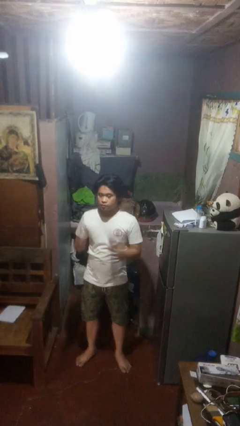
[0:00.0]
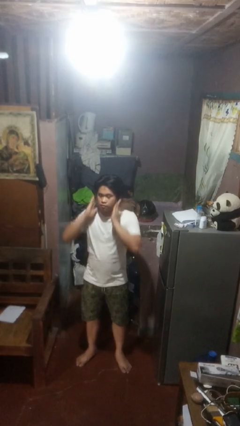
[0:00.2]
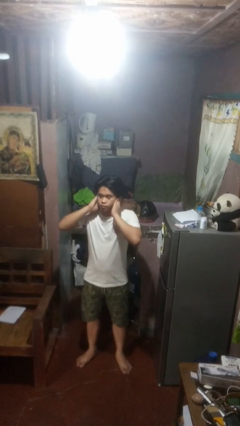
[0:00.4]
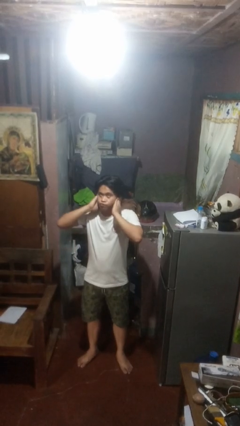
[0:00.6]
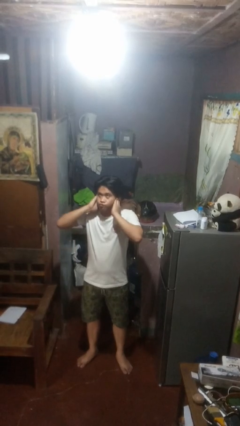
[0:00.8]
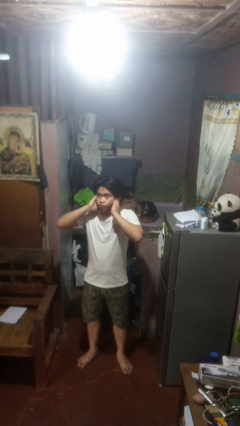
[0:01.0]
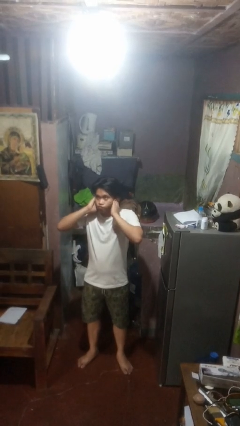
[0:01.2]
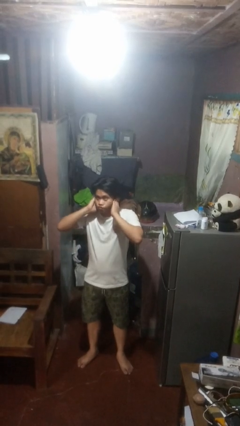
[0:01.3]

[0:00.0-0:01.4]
person puts fingers in ear

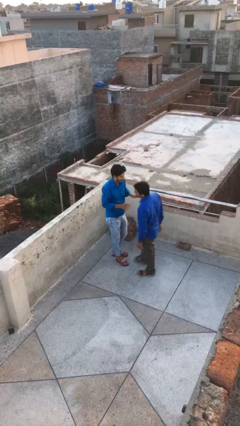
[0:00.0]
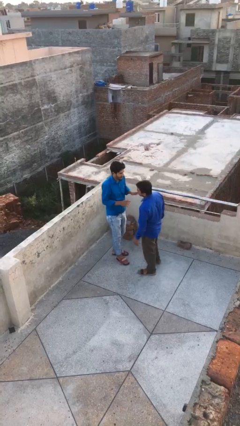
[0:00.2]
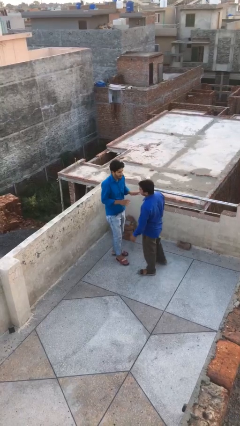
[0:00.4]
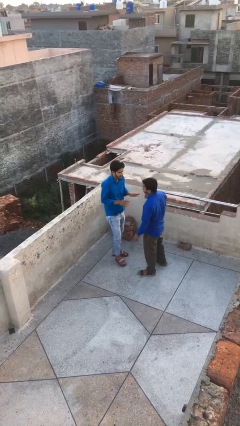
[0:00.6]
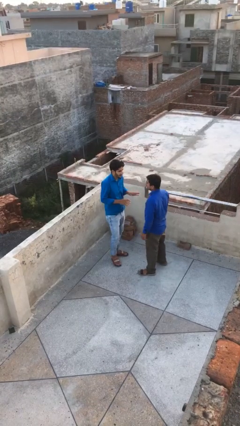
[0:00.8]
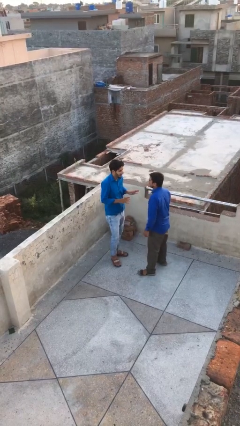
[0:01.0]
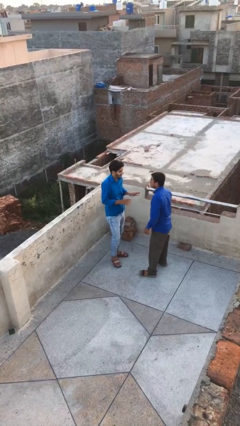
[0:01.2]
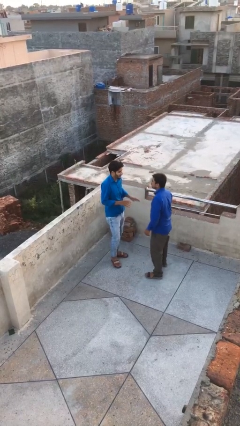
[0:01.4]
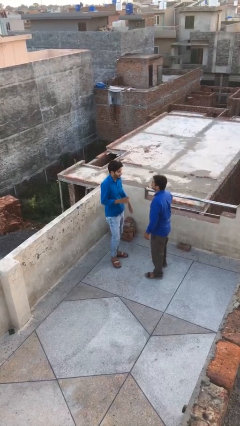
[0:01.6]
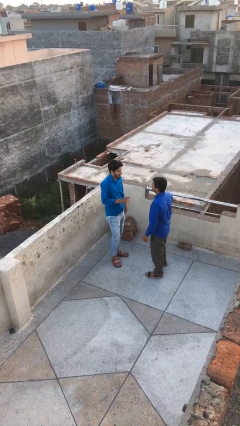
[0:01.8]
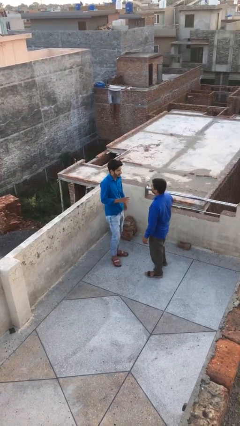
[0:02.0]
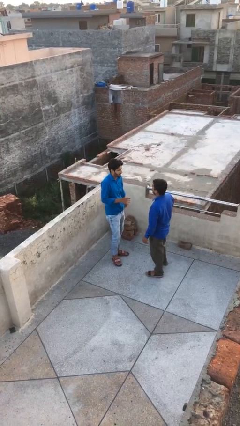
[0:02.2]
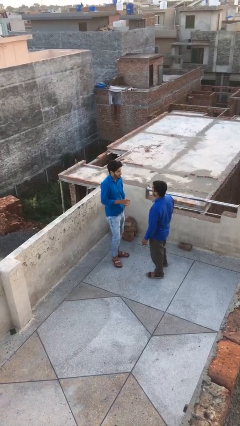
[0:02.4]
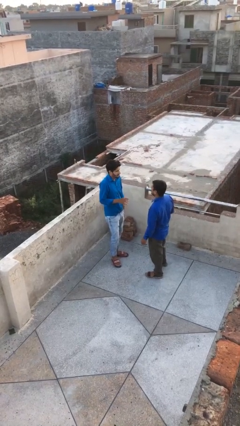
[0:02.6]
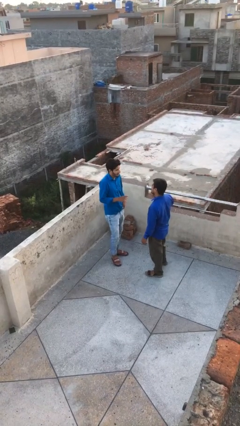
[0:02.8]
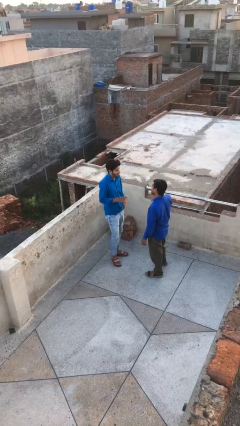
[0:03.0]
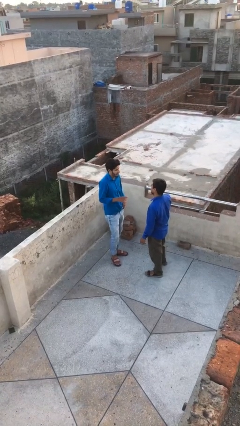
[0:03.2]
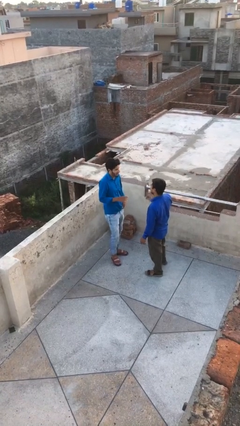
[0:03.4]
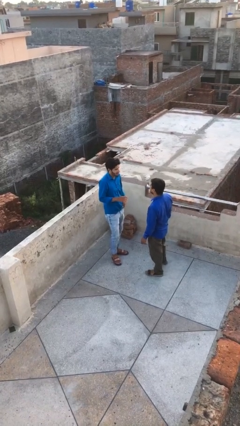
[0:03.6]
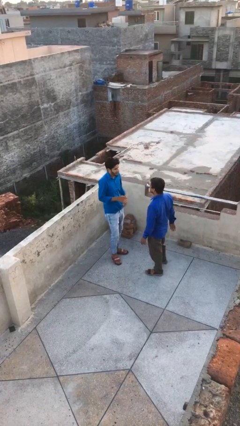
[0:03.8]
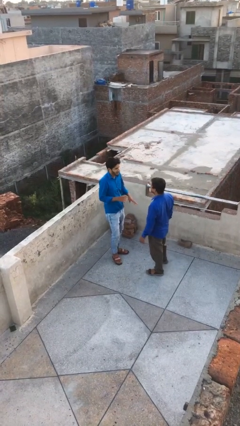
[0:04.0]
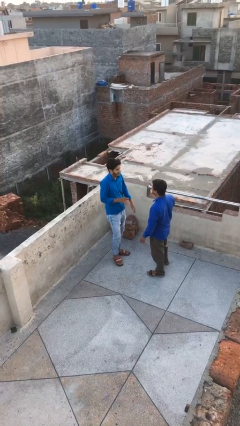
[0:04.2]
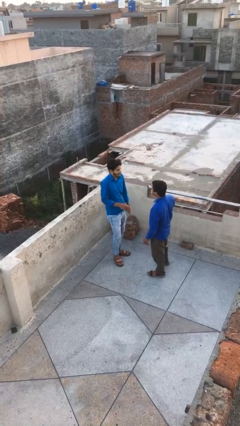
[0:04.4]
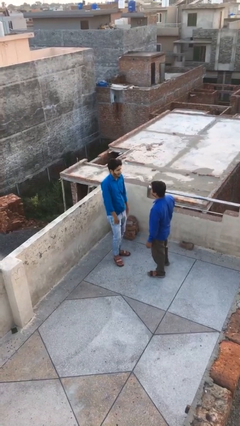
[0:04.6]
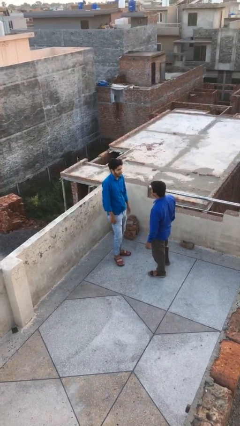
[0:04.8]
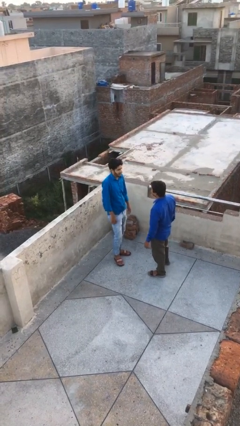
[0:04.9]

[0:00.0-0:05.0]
person talks to person

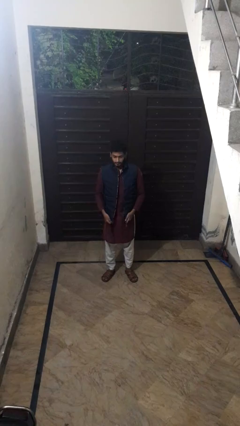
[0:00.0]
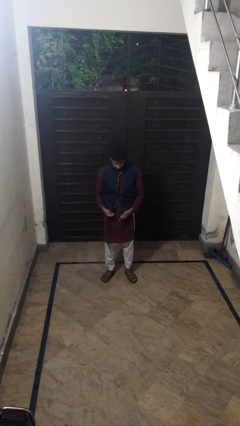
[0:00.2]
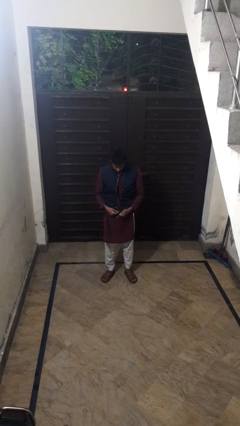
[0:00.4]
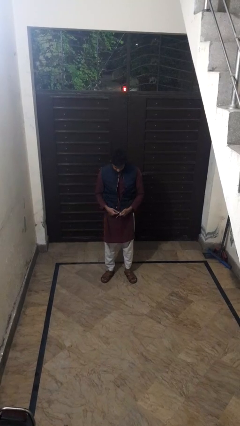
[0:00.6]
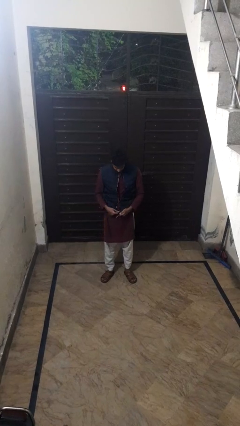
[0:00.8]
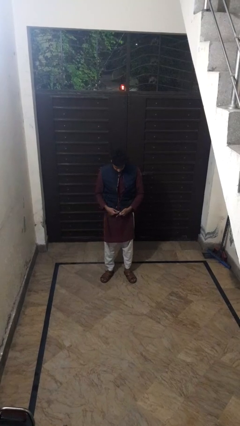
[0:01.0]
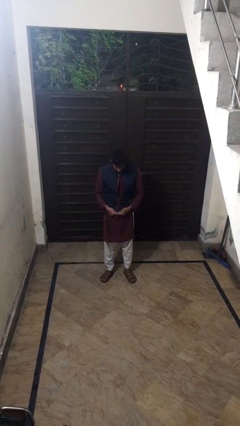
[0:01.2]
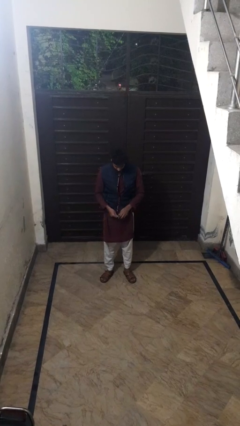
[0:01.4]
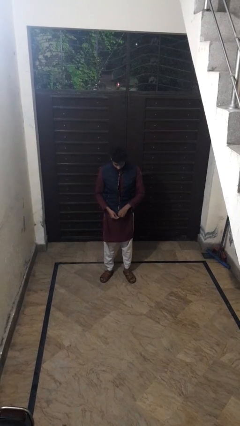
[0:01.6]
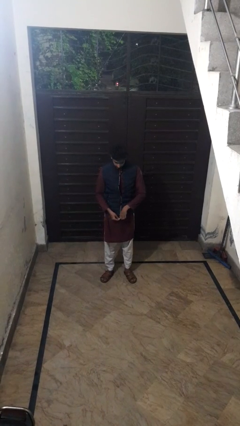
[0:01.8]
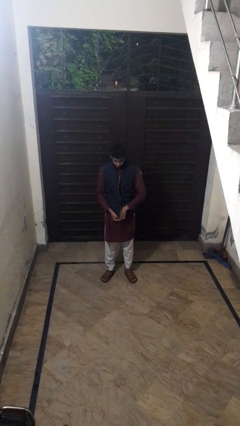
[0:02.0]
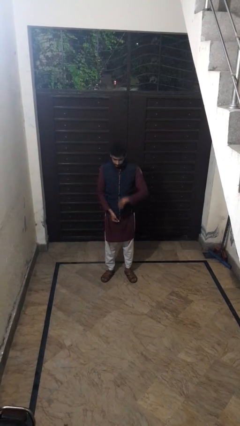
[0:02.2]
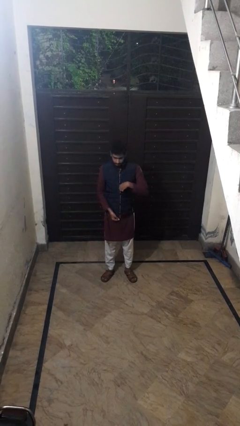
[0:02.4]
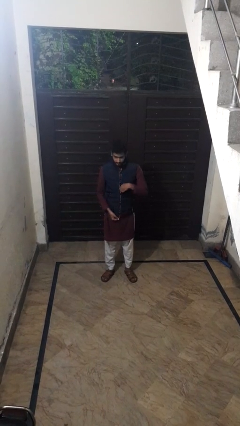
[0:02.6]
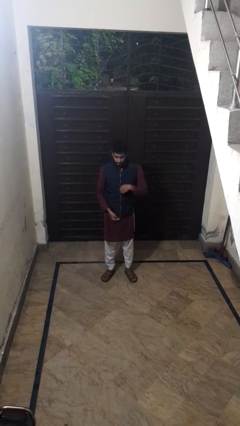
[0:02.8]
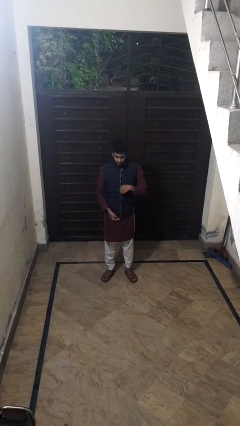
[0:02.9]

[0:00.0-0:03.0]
person zips up jacket

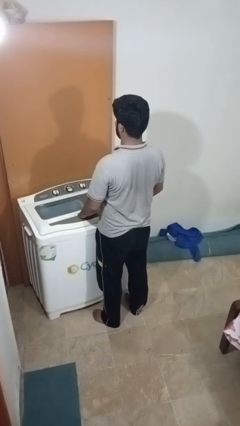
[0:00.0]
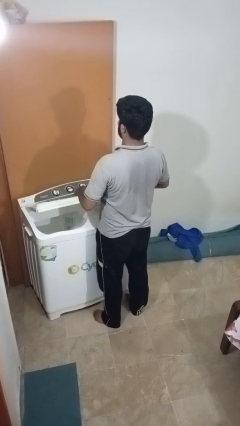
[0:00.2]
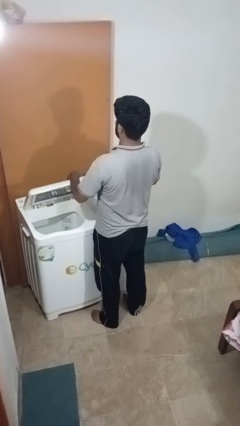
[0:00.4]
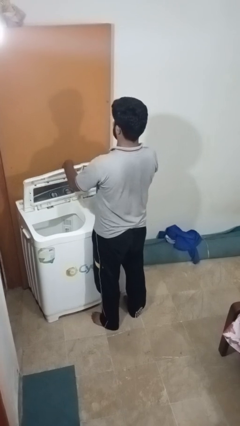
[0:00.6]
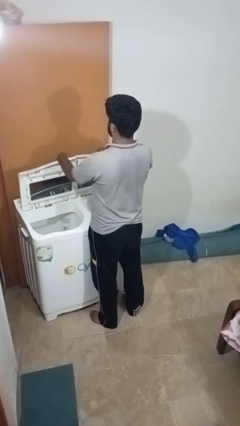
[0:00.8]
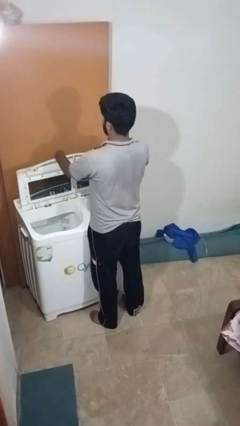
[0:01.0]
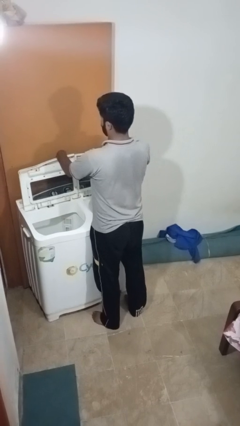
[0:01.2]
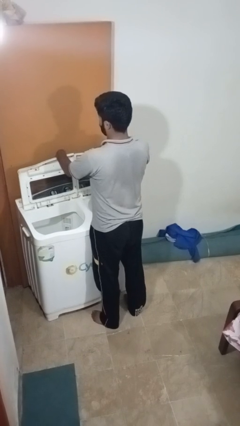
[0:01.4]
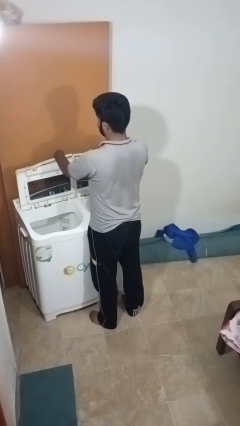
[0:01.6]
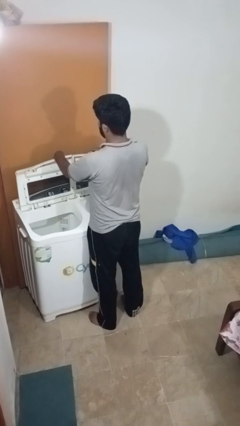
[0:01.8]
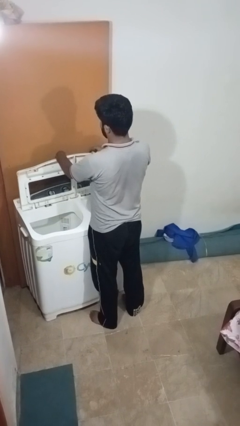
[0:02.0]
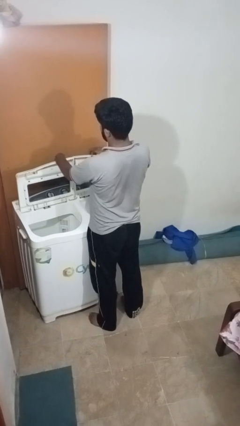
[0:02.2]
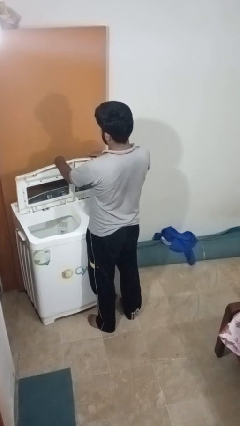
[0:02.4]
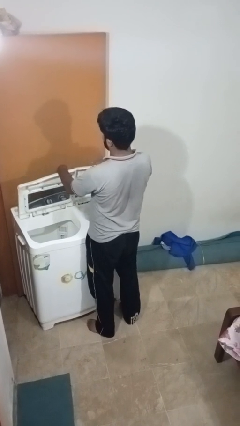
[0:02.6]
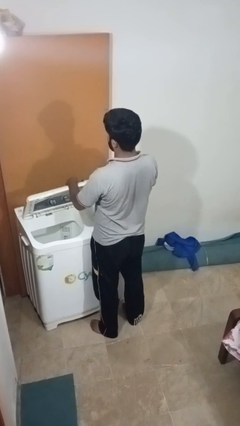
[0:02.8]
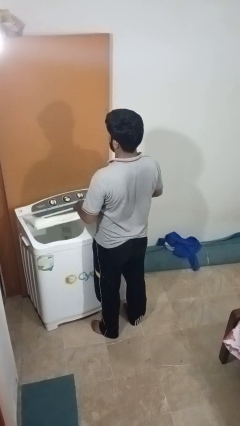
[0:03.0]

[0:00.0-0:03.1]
person opens clothes washer

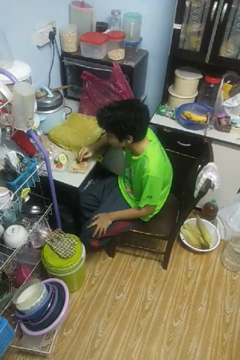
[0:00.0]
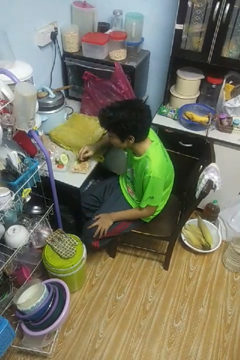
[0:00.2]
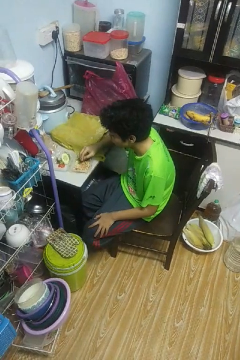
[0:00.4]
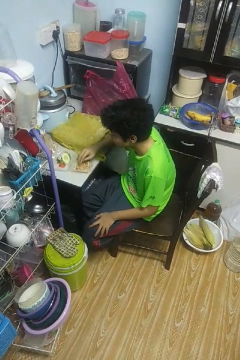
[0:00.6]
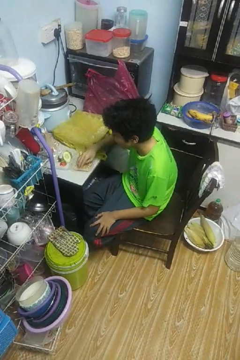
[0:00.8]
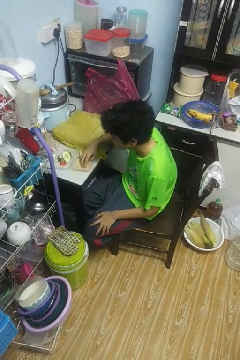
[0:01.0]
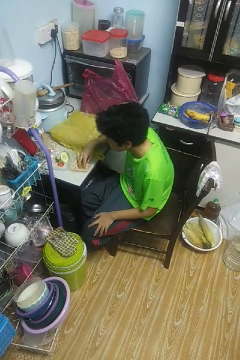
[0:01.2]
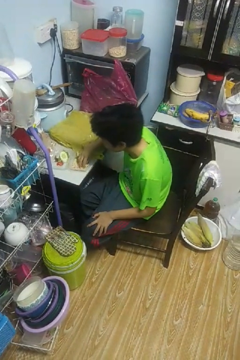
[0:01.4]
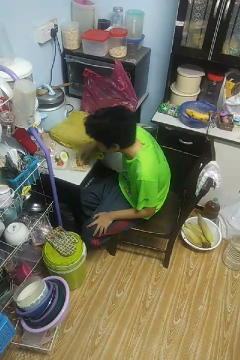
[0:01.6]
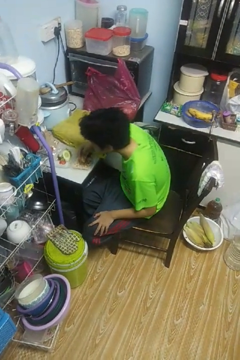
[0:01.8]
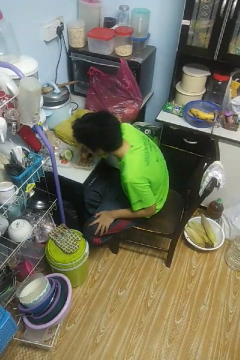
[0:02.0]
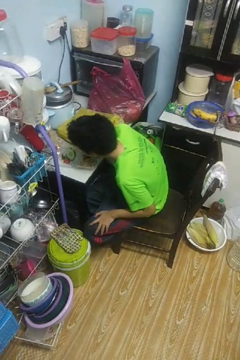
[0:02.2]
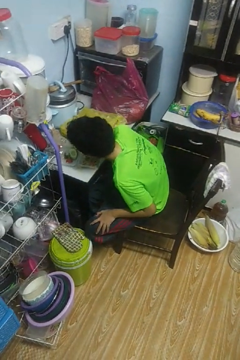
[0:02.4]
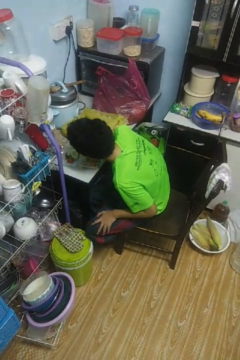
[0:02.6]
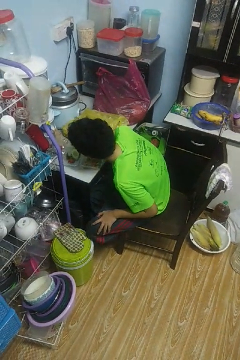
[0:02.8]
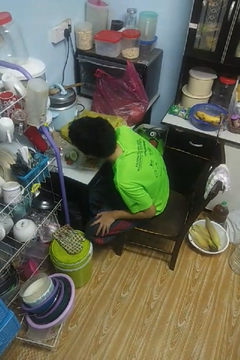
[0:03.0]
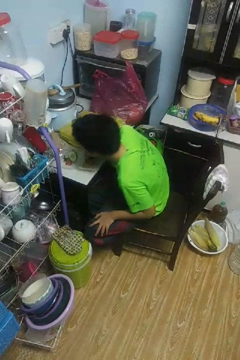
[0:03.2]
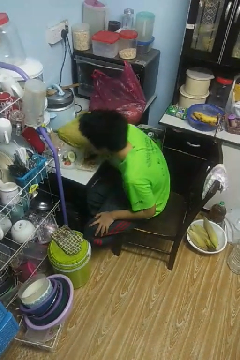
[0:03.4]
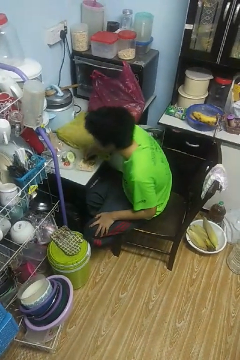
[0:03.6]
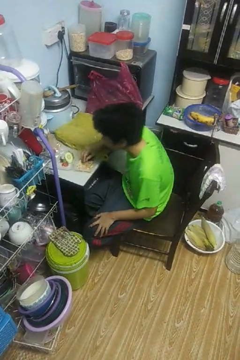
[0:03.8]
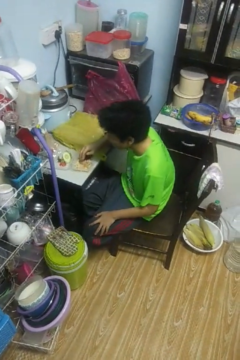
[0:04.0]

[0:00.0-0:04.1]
person eats with hands

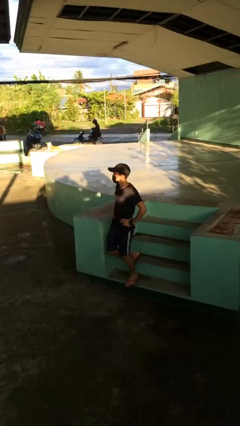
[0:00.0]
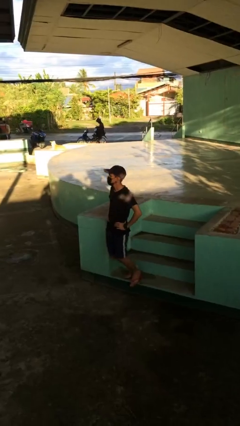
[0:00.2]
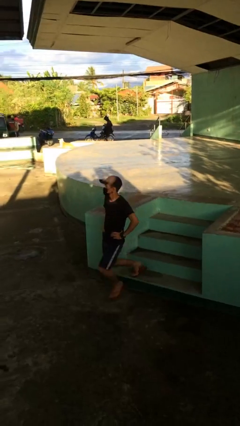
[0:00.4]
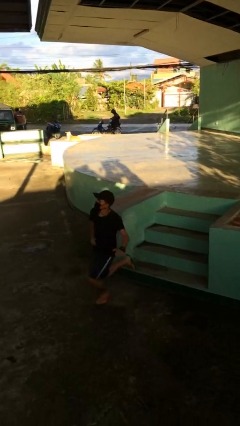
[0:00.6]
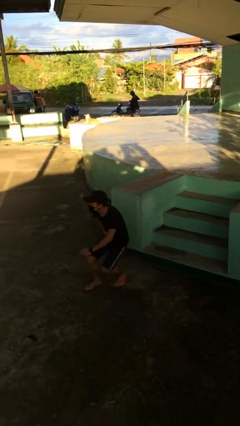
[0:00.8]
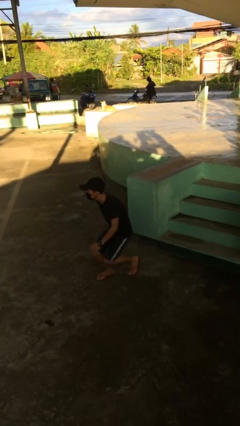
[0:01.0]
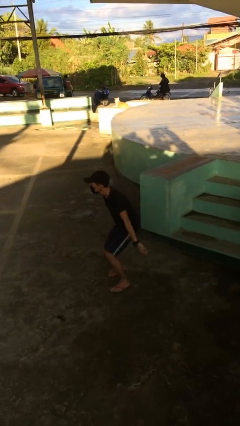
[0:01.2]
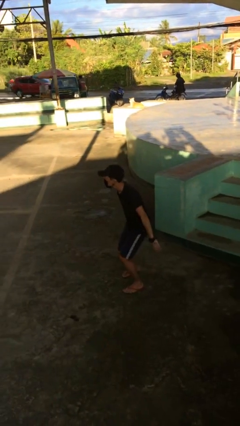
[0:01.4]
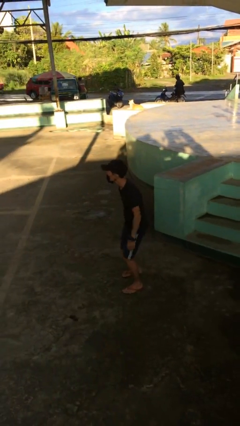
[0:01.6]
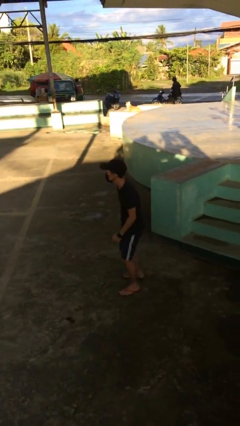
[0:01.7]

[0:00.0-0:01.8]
person trips on stair
